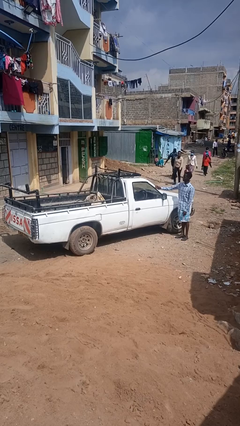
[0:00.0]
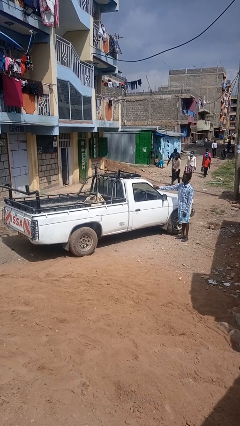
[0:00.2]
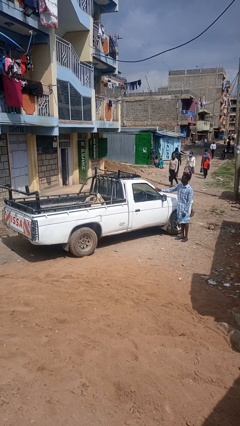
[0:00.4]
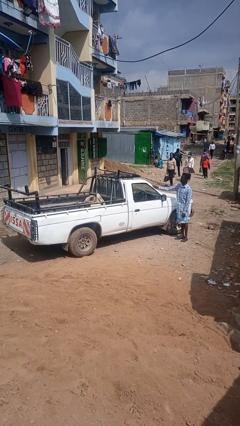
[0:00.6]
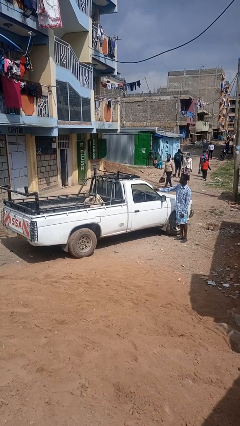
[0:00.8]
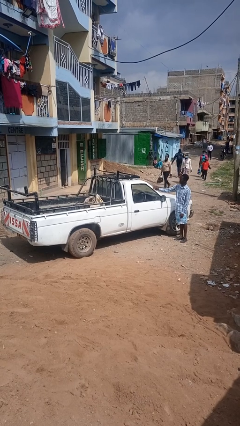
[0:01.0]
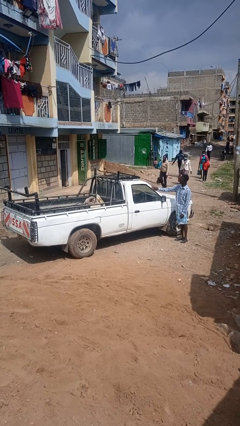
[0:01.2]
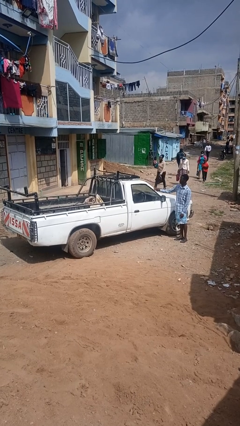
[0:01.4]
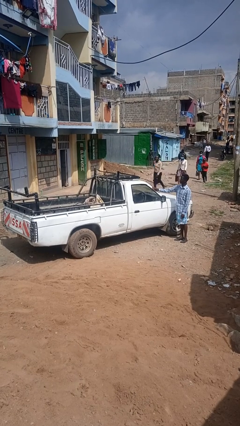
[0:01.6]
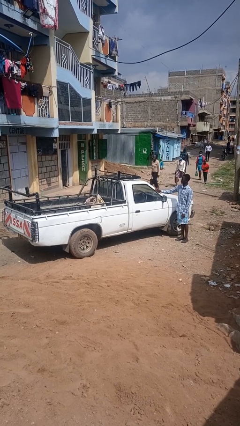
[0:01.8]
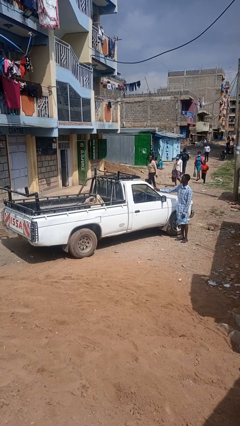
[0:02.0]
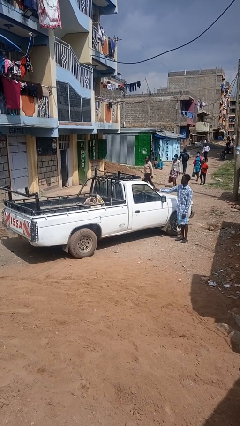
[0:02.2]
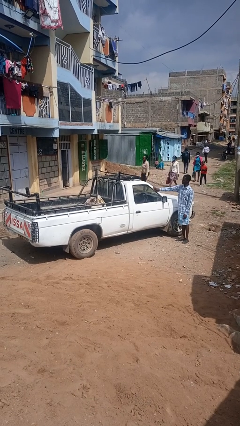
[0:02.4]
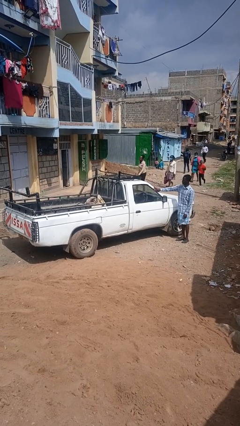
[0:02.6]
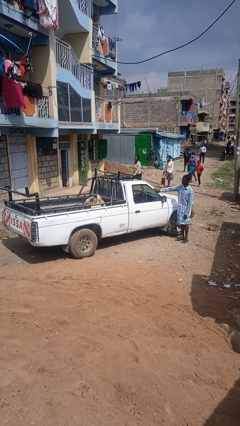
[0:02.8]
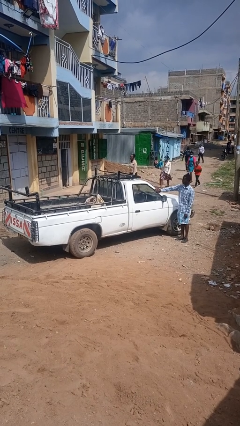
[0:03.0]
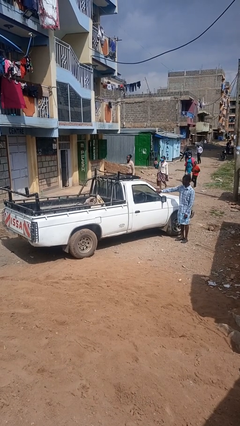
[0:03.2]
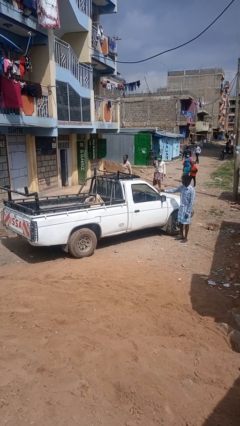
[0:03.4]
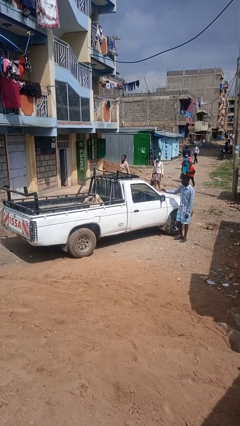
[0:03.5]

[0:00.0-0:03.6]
person polishes car with rag

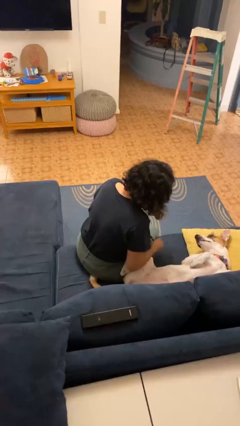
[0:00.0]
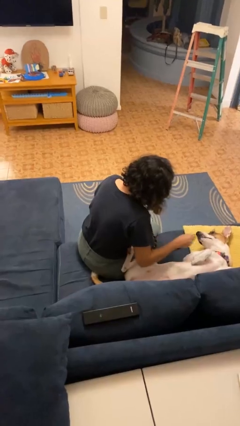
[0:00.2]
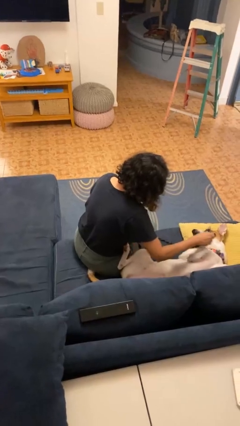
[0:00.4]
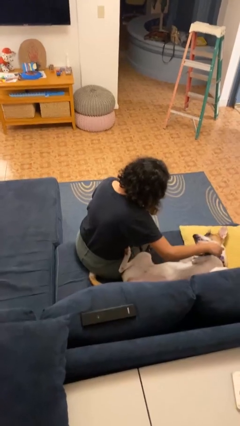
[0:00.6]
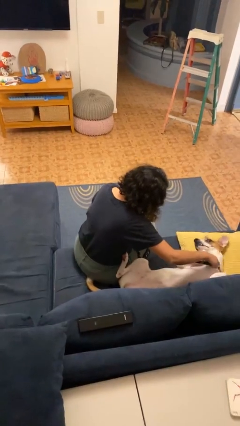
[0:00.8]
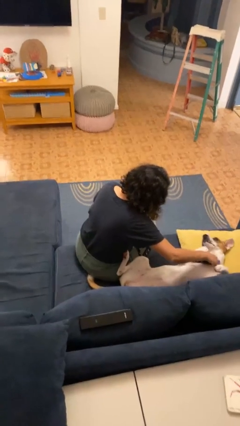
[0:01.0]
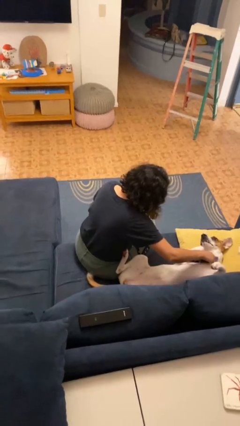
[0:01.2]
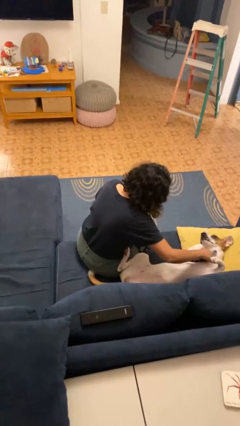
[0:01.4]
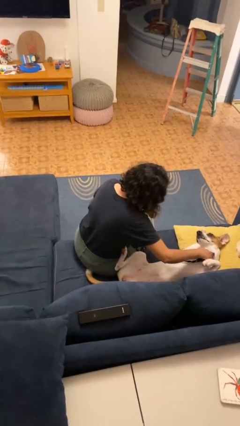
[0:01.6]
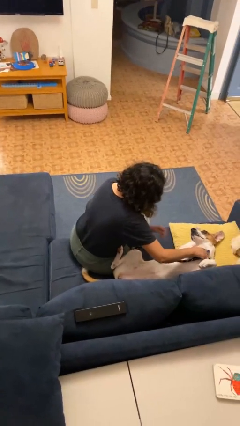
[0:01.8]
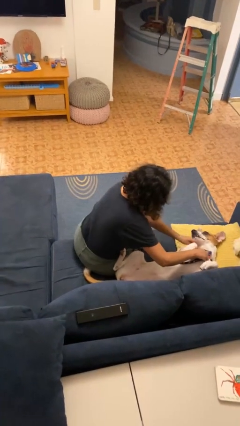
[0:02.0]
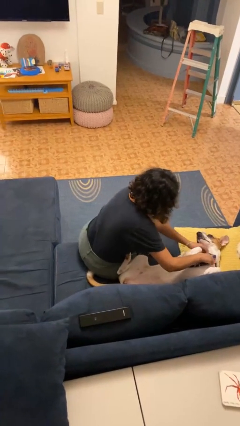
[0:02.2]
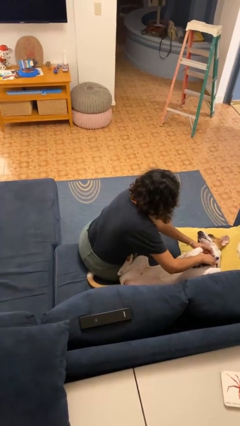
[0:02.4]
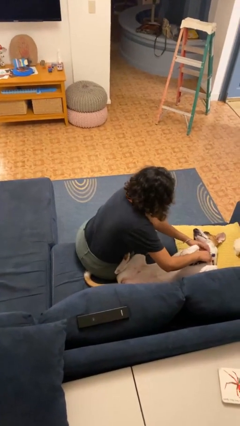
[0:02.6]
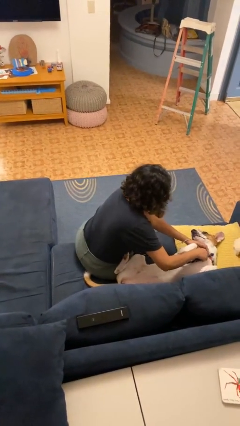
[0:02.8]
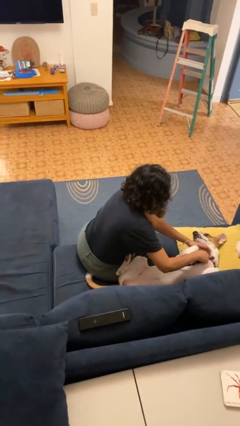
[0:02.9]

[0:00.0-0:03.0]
person attaches leash to dog

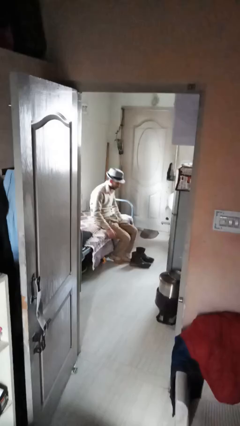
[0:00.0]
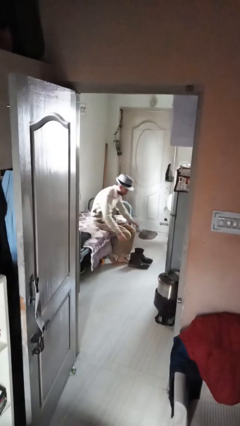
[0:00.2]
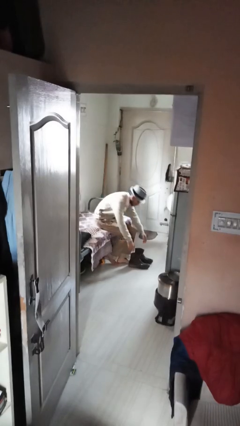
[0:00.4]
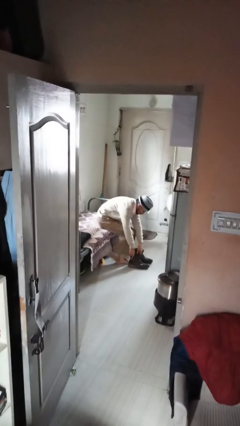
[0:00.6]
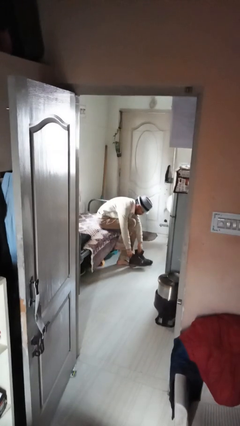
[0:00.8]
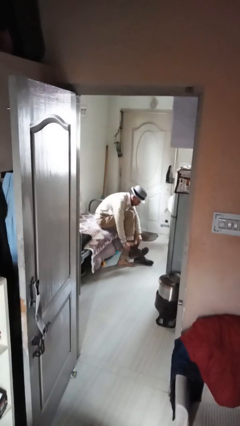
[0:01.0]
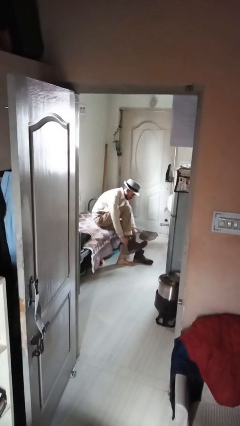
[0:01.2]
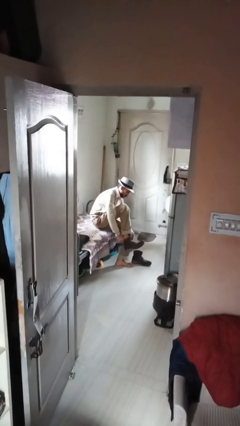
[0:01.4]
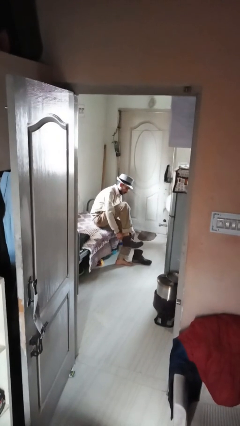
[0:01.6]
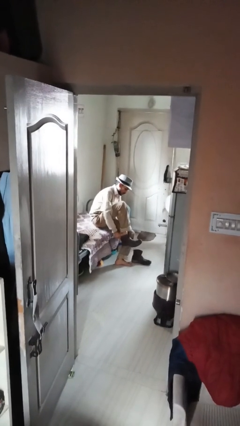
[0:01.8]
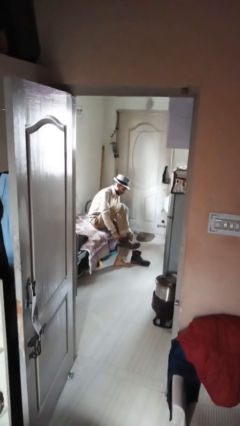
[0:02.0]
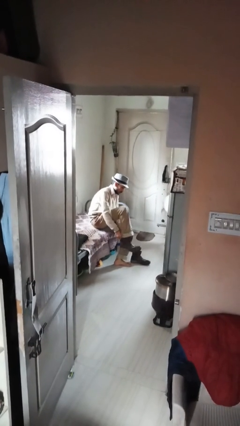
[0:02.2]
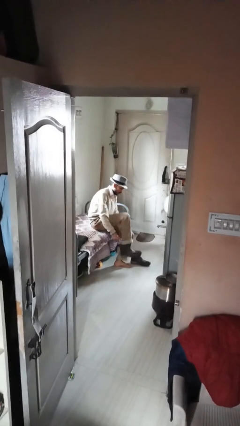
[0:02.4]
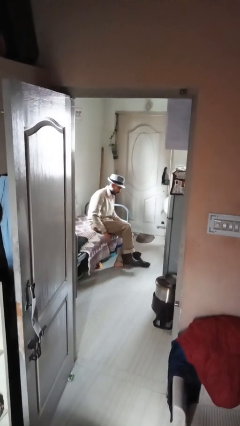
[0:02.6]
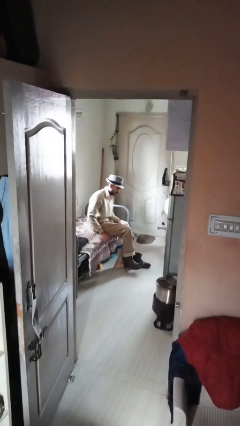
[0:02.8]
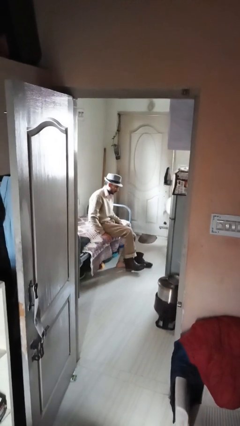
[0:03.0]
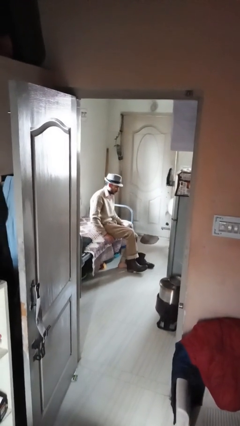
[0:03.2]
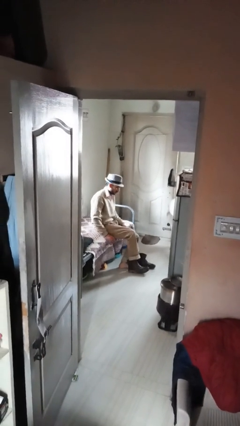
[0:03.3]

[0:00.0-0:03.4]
person puts on boots

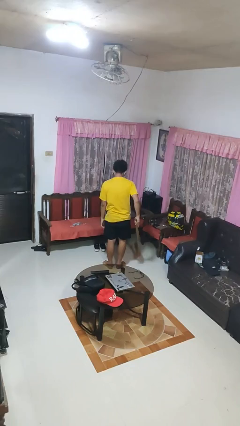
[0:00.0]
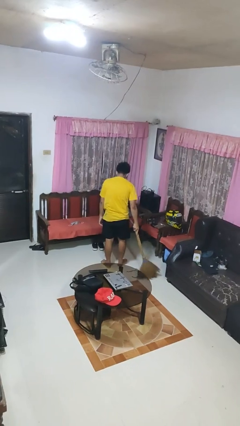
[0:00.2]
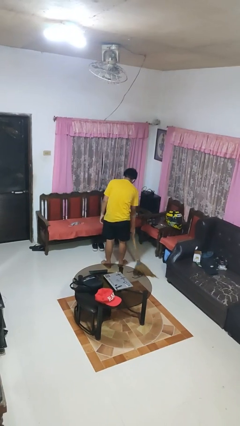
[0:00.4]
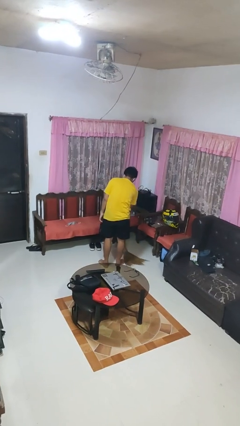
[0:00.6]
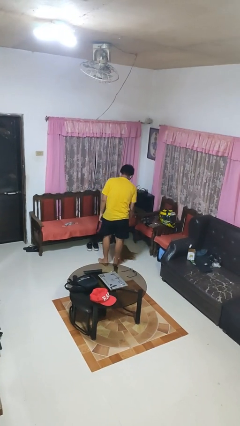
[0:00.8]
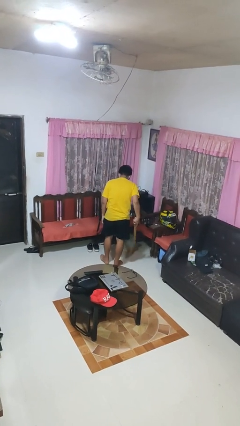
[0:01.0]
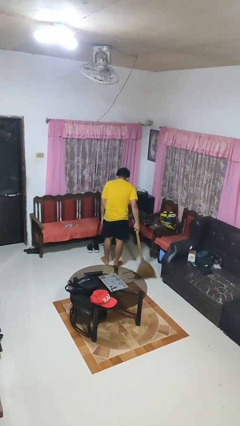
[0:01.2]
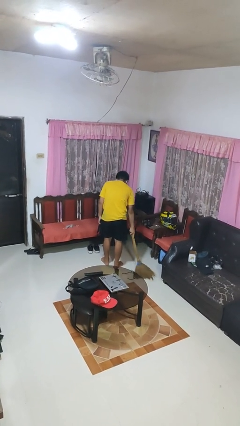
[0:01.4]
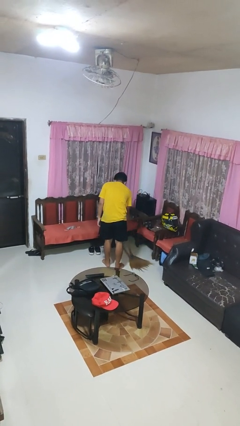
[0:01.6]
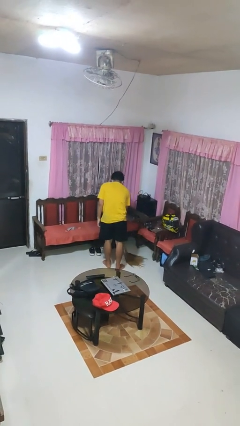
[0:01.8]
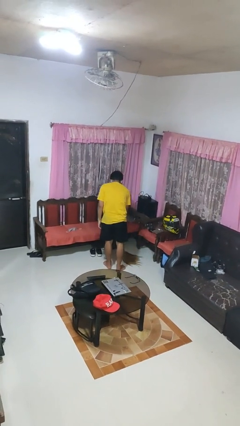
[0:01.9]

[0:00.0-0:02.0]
person sweeps floor

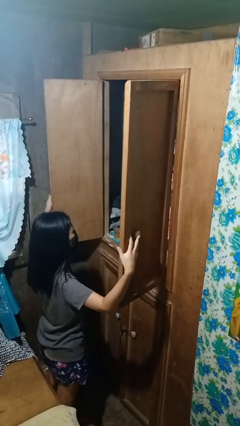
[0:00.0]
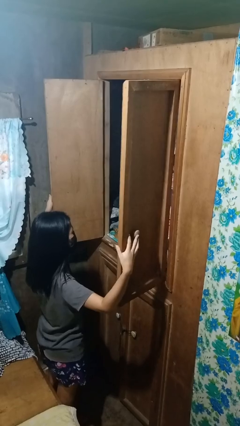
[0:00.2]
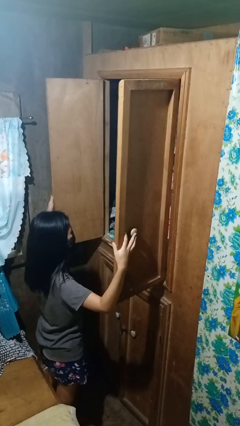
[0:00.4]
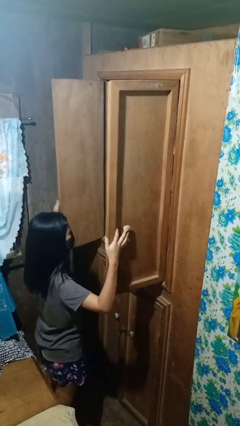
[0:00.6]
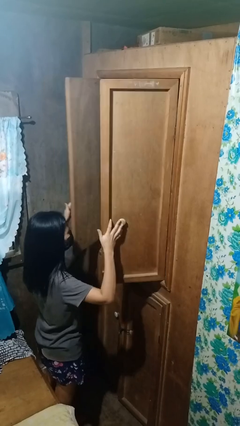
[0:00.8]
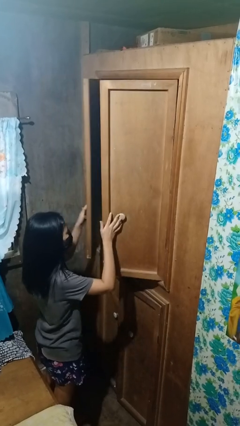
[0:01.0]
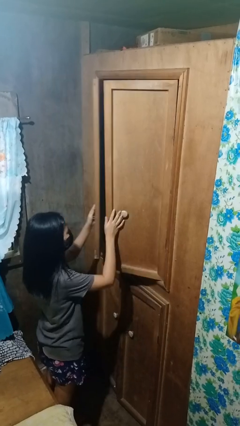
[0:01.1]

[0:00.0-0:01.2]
person closes closet door

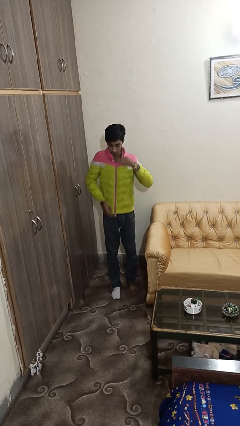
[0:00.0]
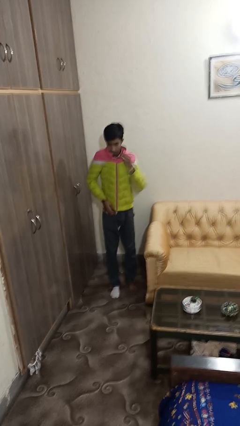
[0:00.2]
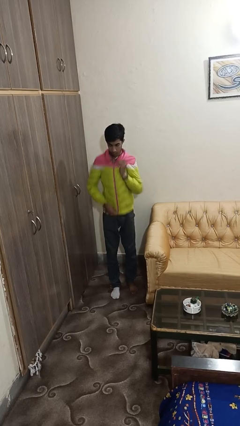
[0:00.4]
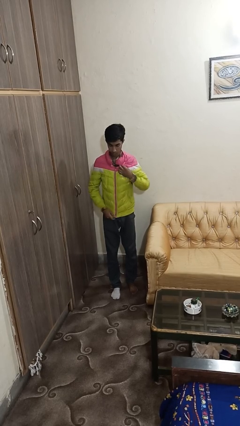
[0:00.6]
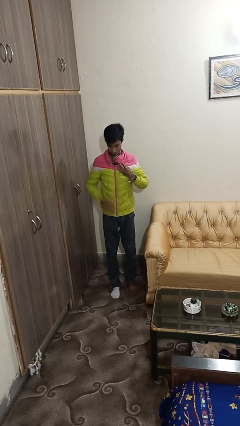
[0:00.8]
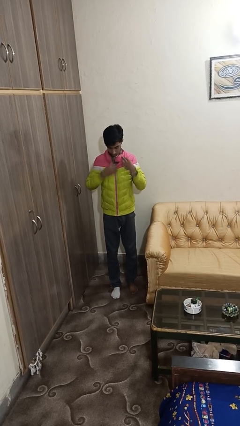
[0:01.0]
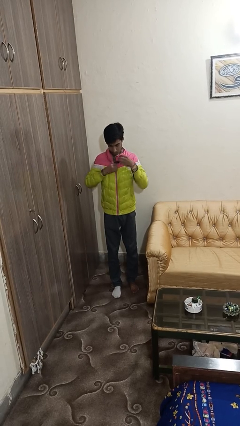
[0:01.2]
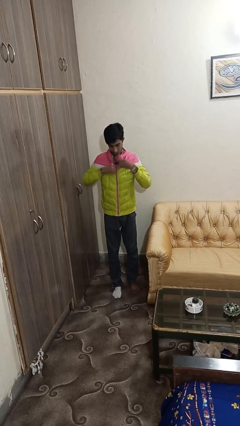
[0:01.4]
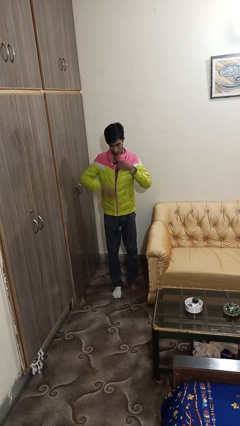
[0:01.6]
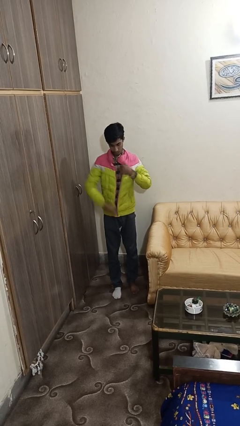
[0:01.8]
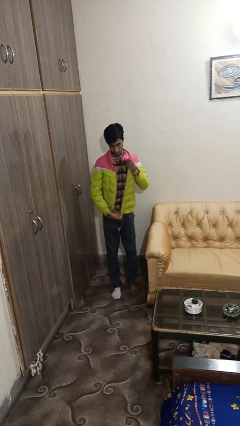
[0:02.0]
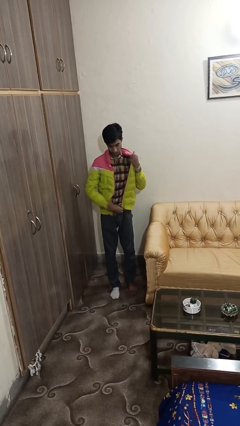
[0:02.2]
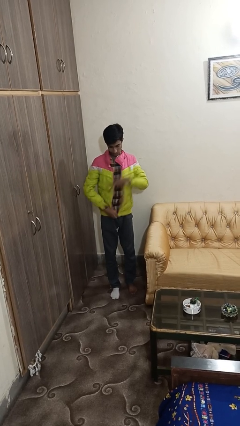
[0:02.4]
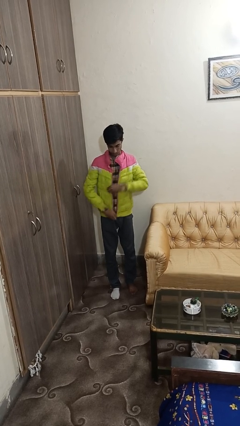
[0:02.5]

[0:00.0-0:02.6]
person unzips jacket

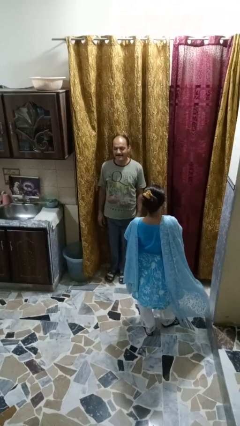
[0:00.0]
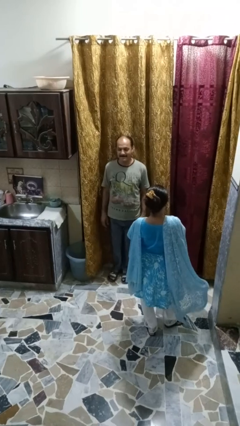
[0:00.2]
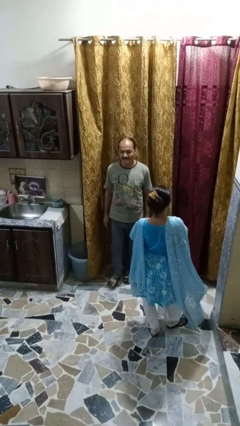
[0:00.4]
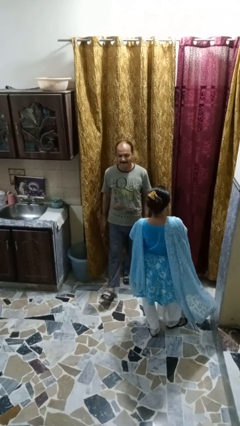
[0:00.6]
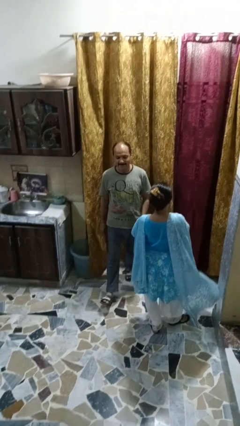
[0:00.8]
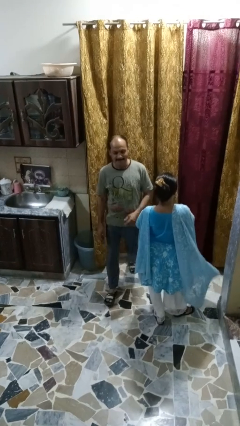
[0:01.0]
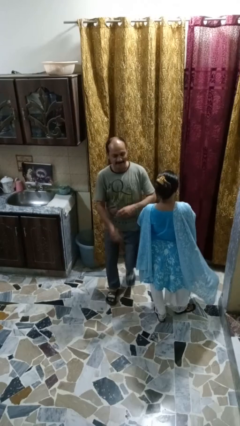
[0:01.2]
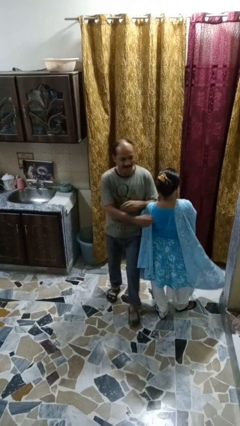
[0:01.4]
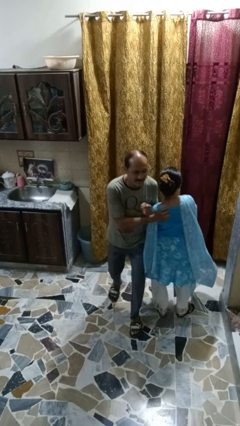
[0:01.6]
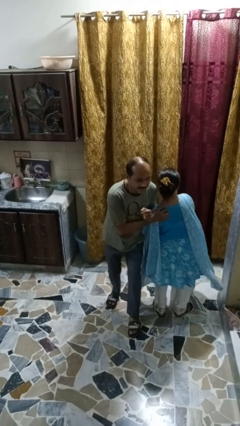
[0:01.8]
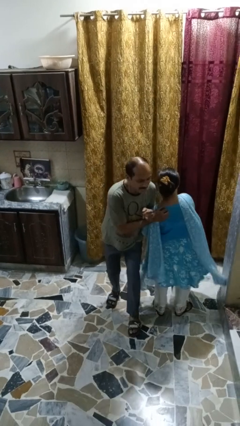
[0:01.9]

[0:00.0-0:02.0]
person bumps into person
